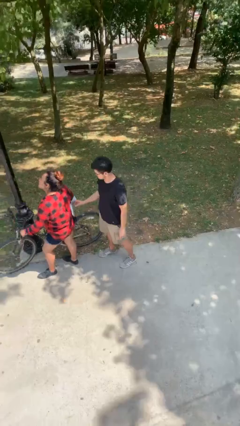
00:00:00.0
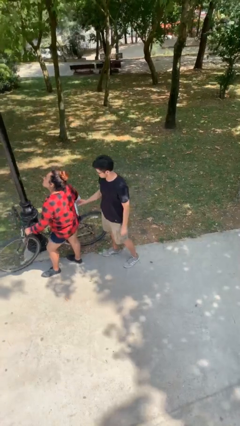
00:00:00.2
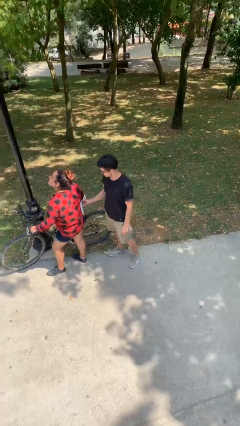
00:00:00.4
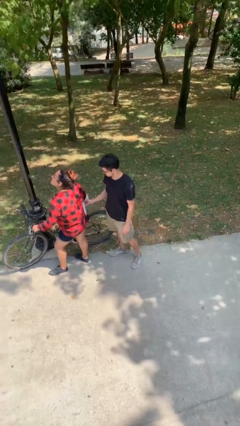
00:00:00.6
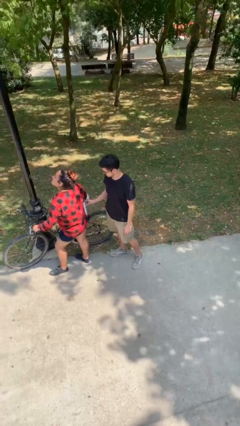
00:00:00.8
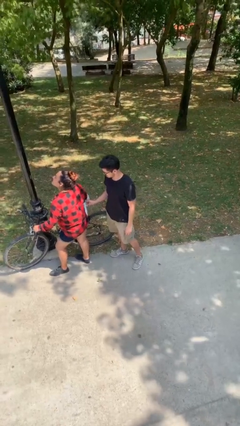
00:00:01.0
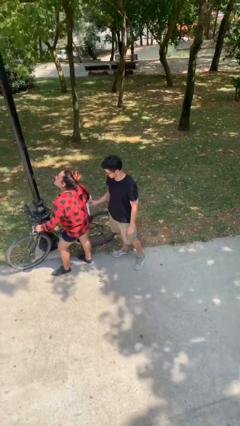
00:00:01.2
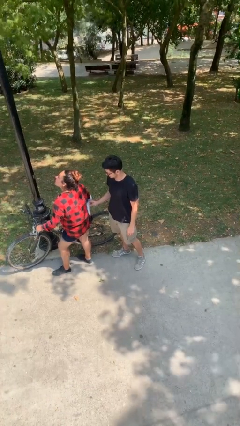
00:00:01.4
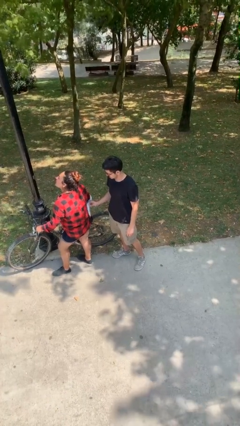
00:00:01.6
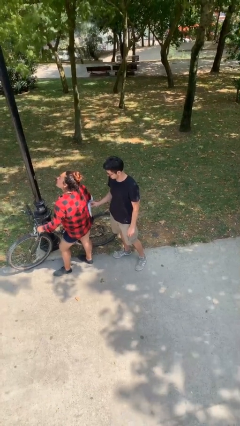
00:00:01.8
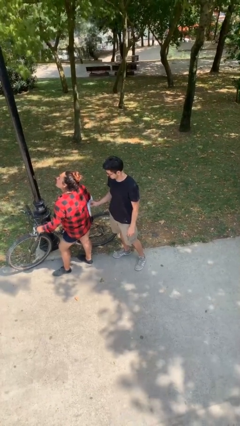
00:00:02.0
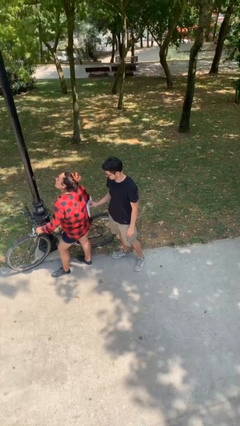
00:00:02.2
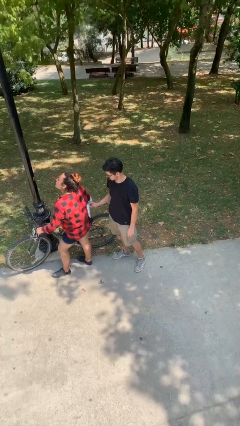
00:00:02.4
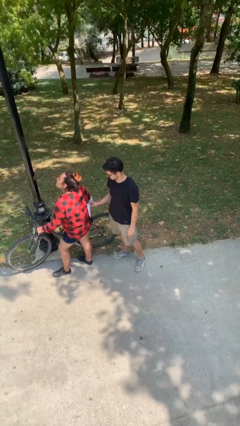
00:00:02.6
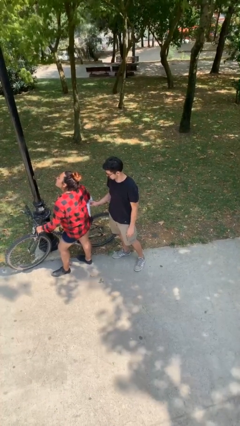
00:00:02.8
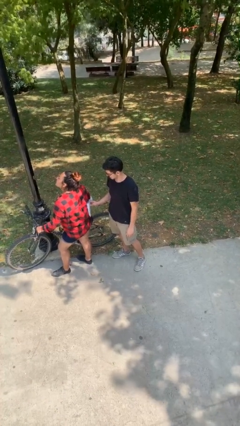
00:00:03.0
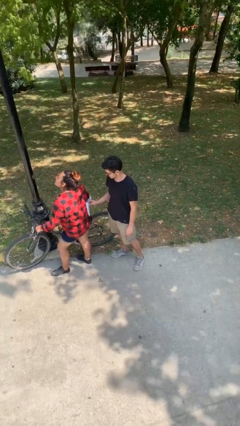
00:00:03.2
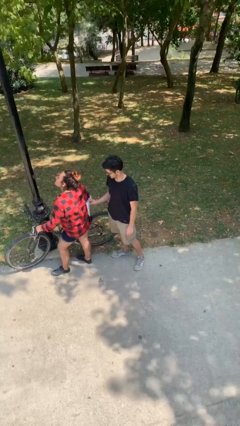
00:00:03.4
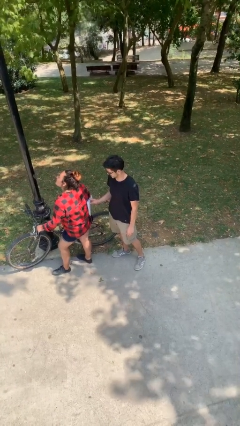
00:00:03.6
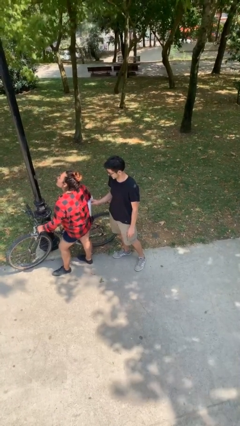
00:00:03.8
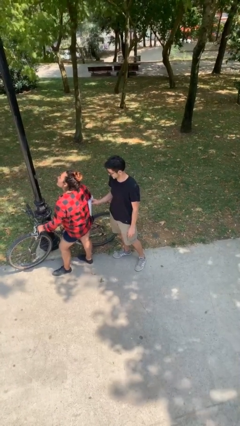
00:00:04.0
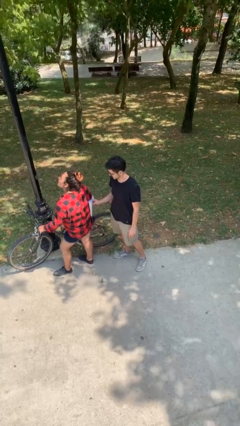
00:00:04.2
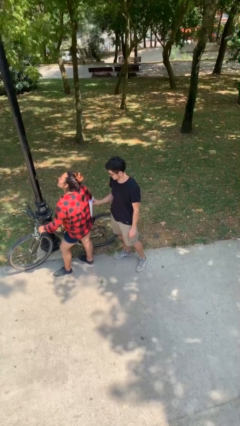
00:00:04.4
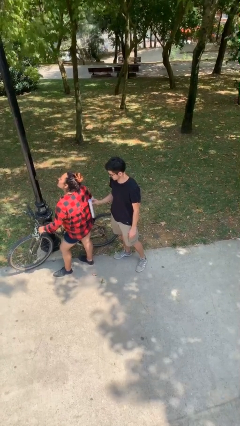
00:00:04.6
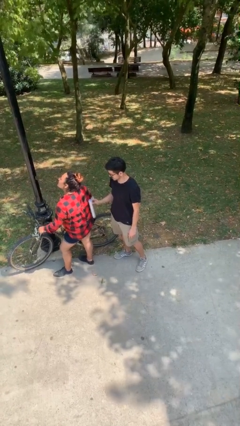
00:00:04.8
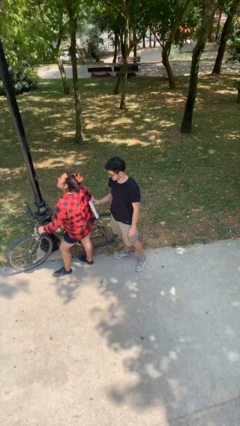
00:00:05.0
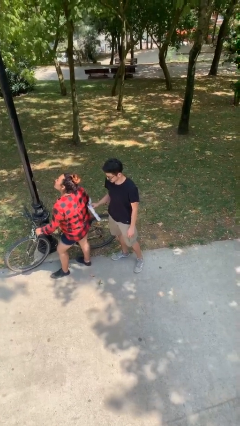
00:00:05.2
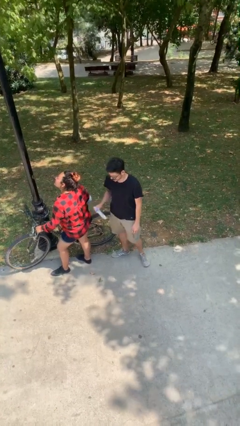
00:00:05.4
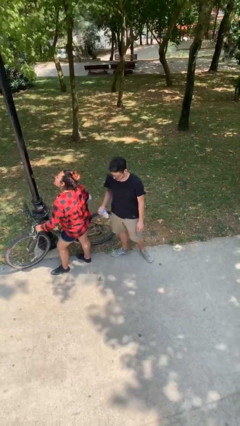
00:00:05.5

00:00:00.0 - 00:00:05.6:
person steals object from person

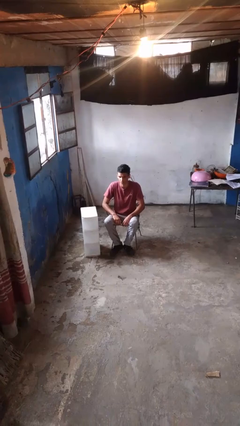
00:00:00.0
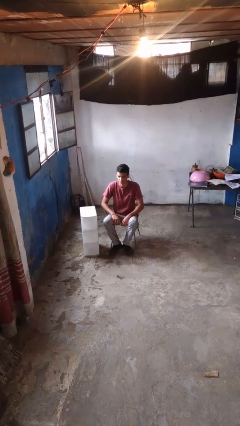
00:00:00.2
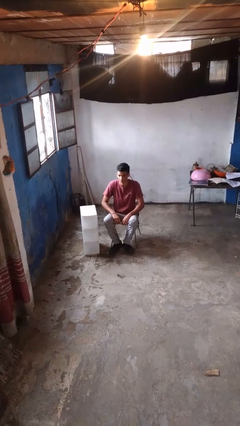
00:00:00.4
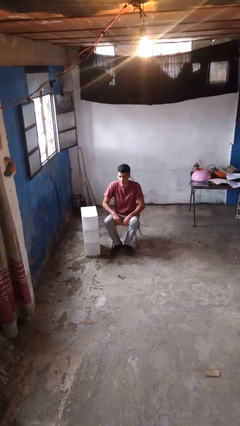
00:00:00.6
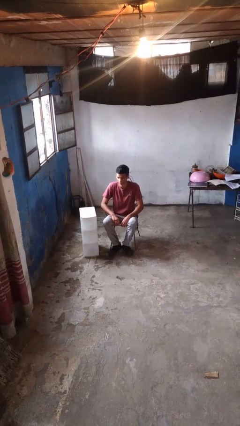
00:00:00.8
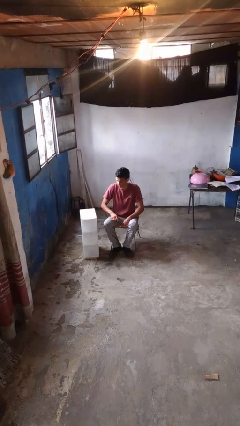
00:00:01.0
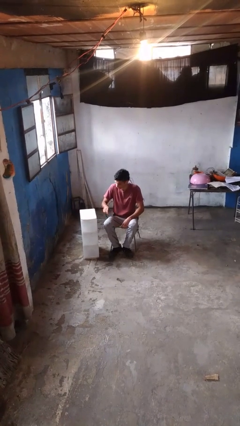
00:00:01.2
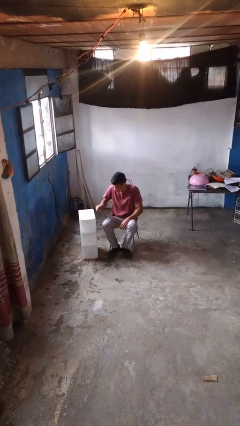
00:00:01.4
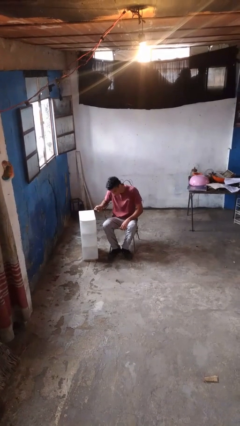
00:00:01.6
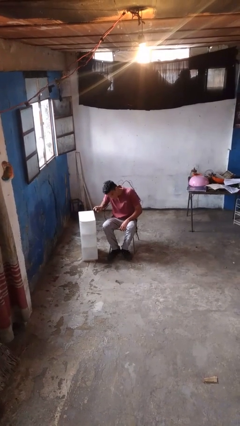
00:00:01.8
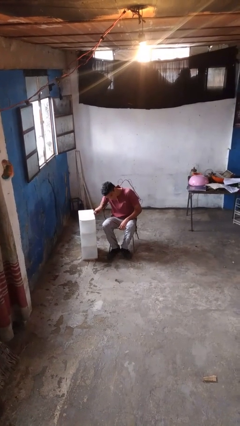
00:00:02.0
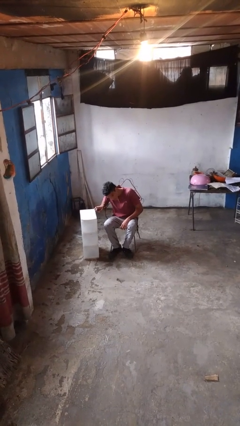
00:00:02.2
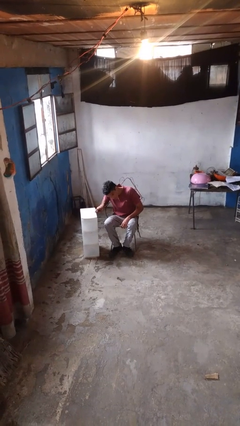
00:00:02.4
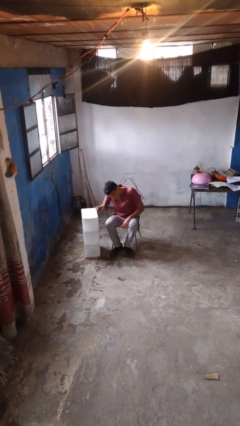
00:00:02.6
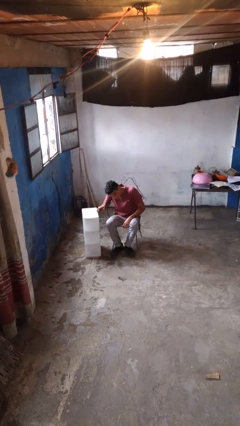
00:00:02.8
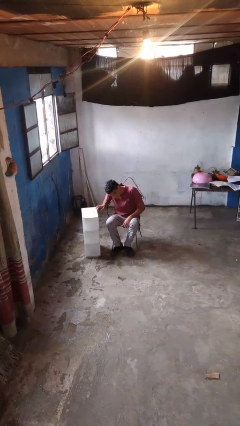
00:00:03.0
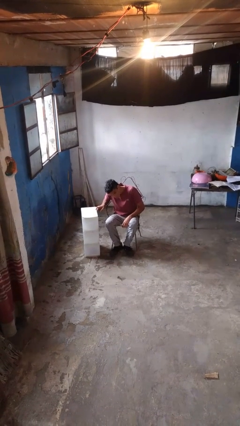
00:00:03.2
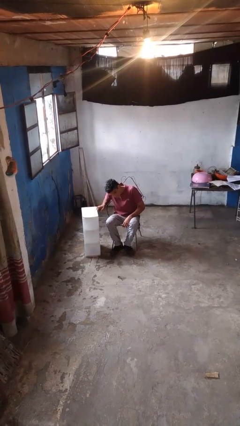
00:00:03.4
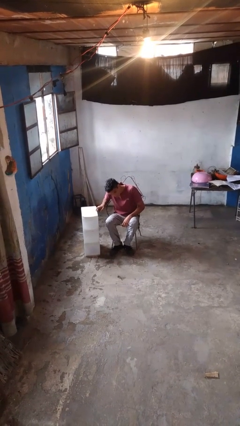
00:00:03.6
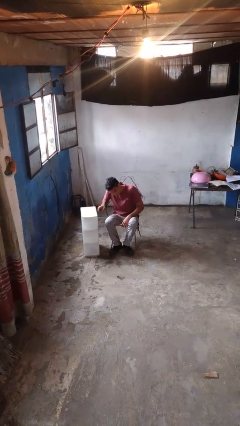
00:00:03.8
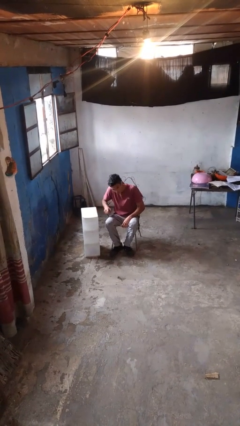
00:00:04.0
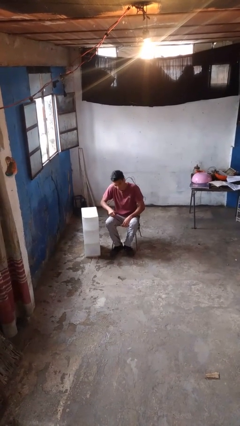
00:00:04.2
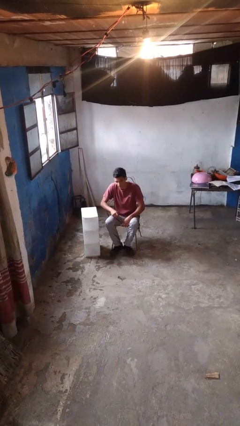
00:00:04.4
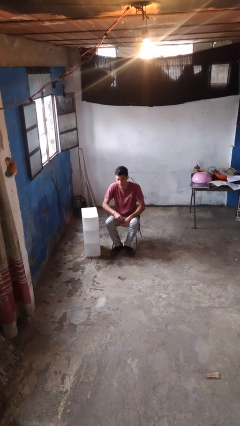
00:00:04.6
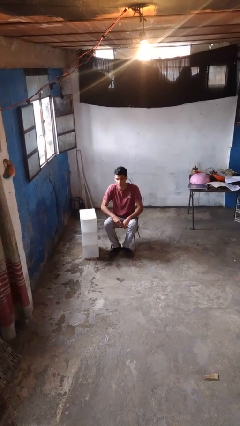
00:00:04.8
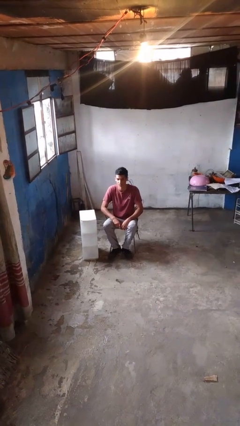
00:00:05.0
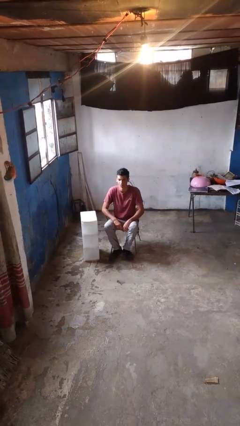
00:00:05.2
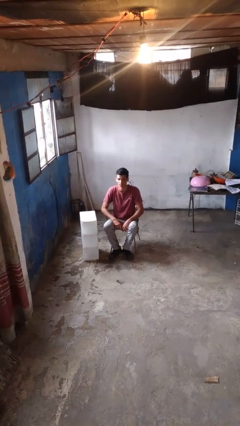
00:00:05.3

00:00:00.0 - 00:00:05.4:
person taps object with finger

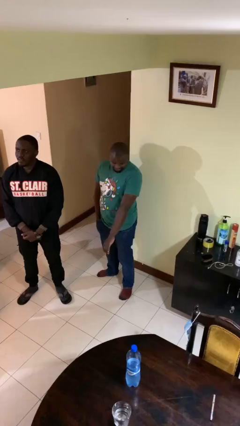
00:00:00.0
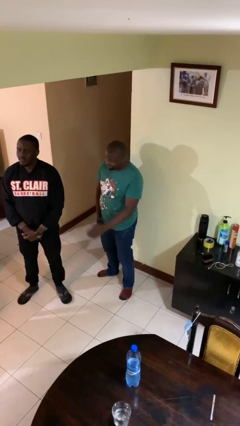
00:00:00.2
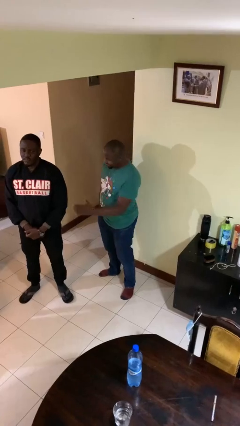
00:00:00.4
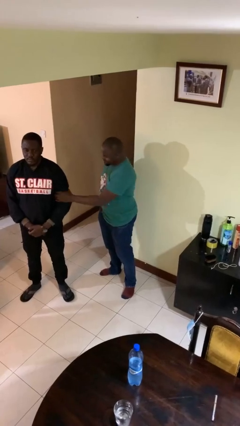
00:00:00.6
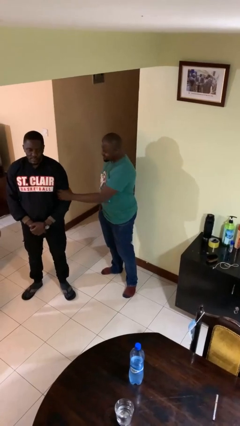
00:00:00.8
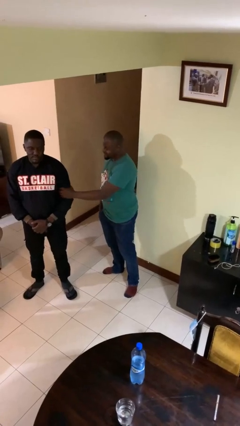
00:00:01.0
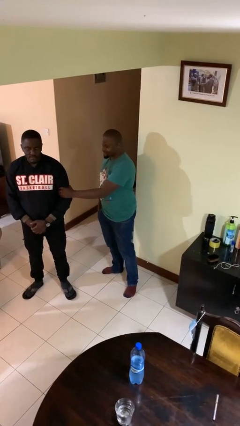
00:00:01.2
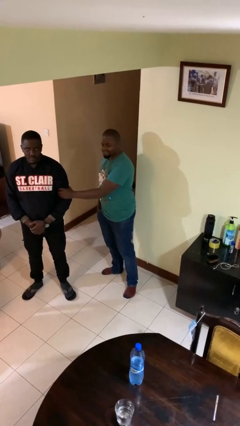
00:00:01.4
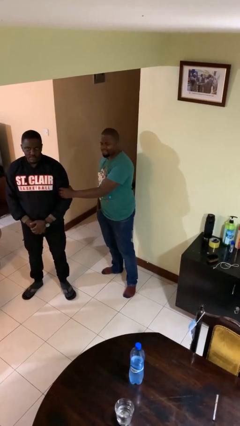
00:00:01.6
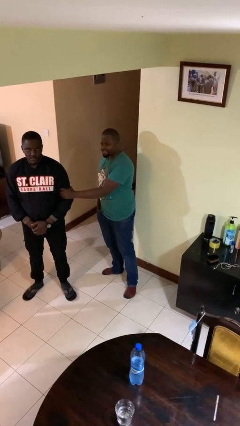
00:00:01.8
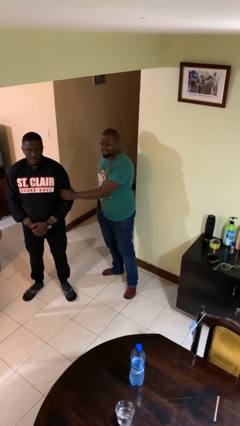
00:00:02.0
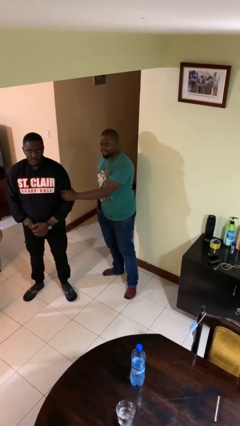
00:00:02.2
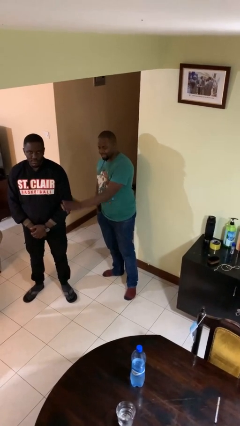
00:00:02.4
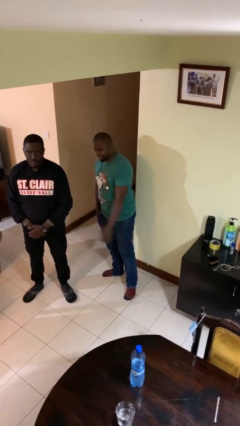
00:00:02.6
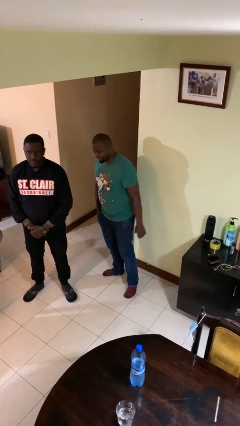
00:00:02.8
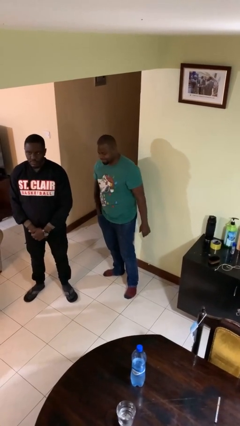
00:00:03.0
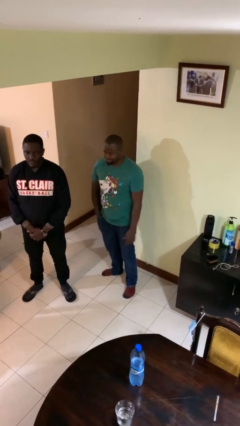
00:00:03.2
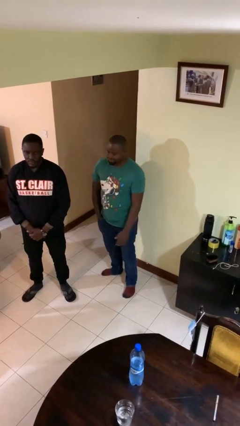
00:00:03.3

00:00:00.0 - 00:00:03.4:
person grabs person by bicep

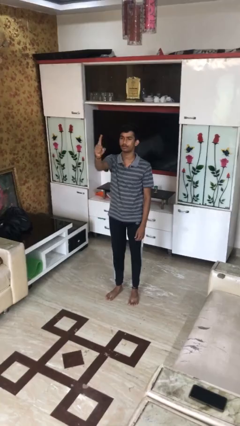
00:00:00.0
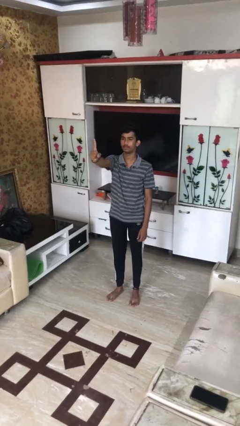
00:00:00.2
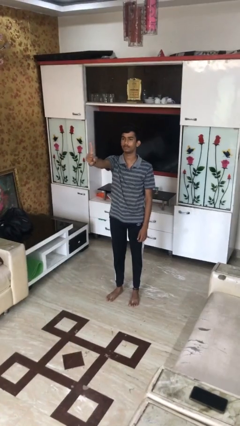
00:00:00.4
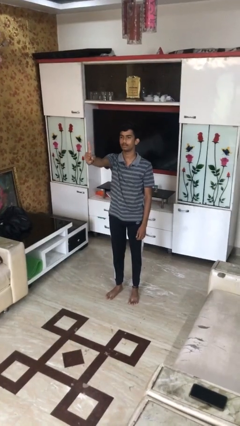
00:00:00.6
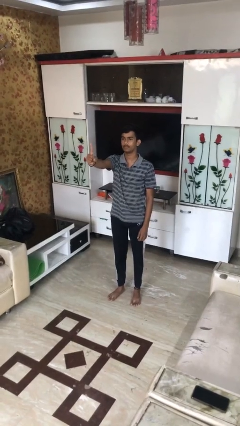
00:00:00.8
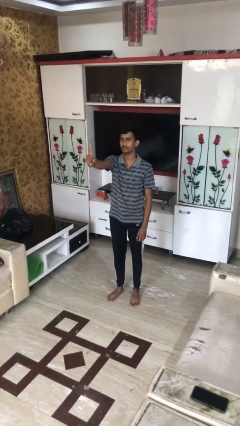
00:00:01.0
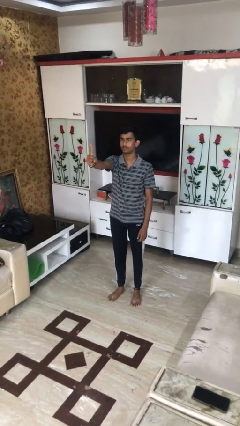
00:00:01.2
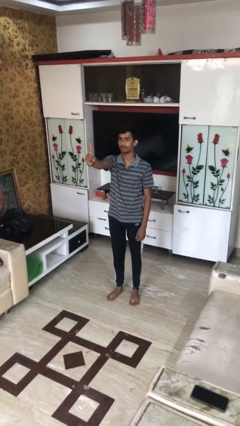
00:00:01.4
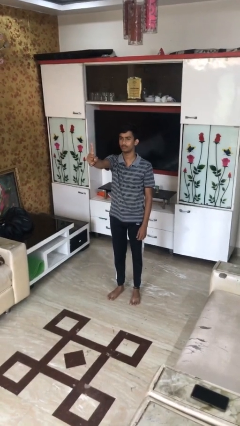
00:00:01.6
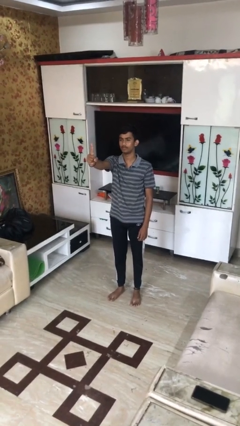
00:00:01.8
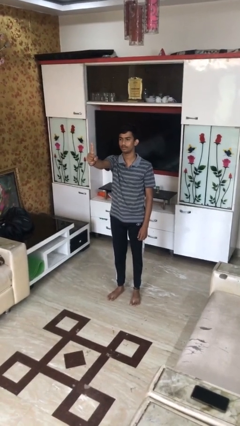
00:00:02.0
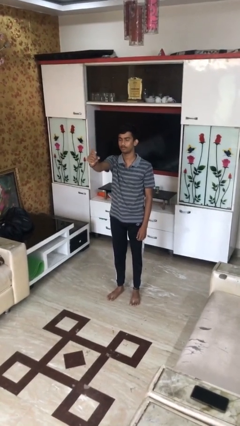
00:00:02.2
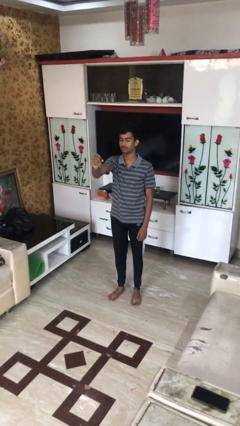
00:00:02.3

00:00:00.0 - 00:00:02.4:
person gestures number one

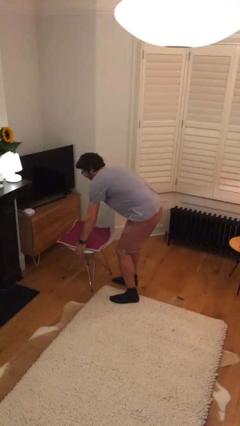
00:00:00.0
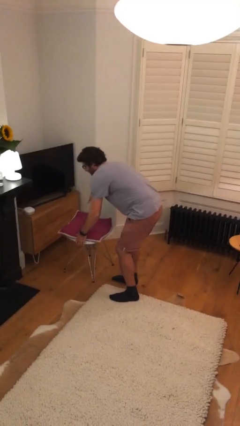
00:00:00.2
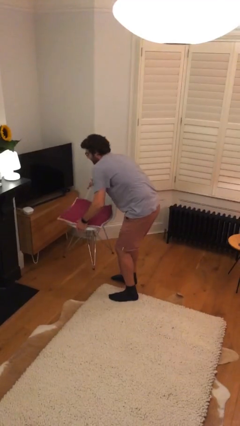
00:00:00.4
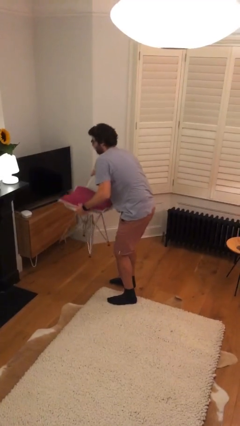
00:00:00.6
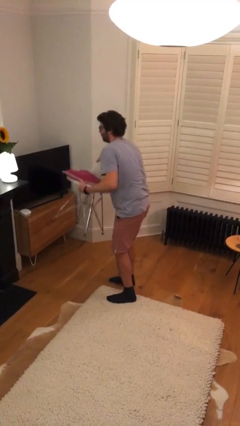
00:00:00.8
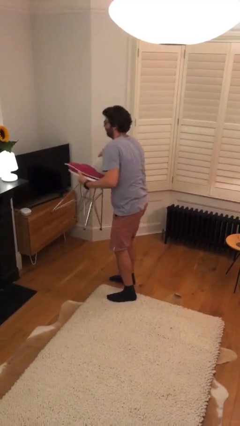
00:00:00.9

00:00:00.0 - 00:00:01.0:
person picks up object from floor

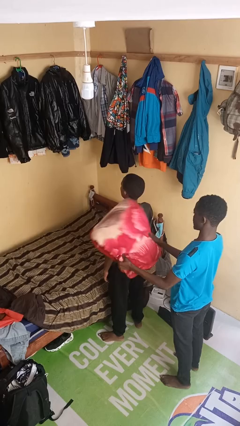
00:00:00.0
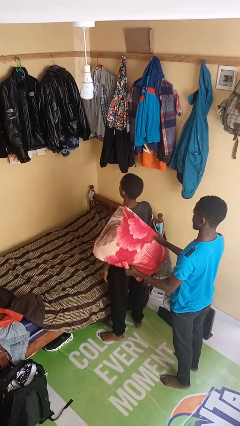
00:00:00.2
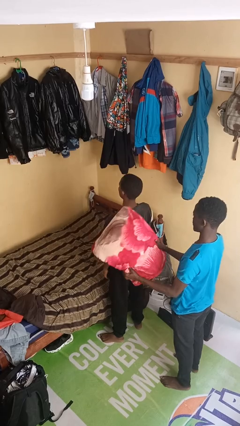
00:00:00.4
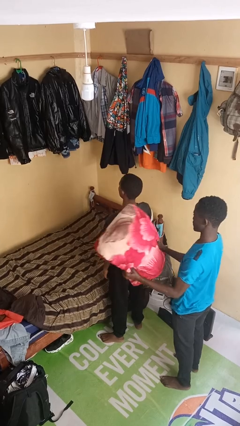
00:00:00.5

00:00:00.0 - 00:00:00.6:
person hits person with pillow
